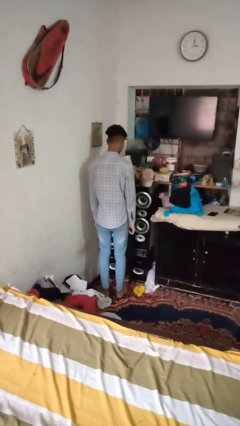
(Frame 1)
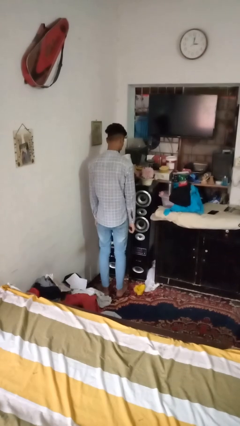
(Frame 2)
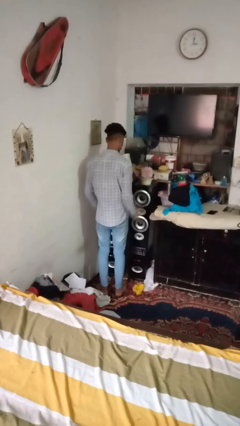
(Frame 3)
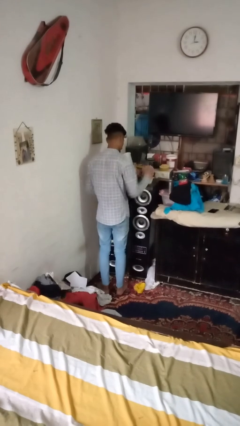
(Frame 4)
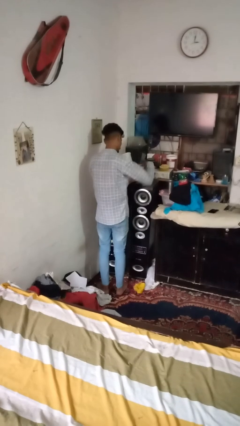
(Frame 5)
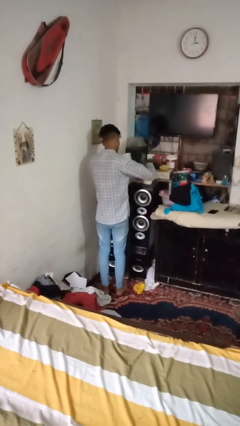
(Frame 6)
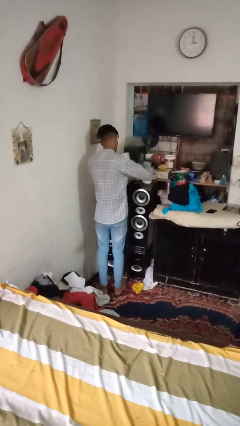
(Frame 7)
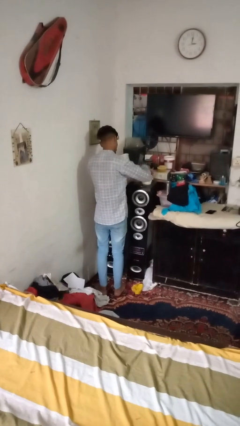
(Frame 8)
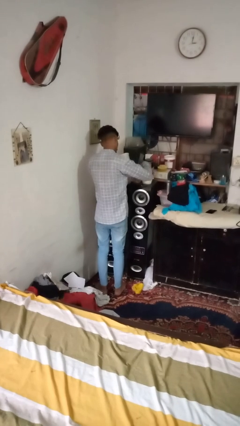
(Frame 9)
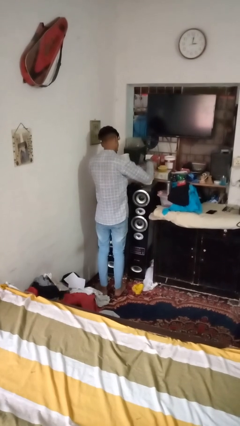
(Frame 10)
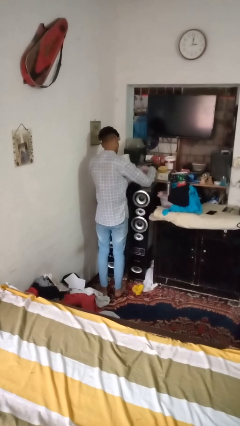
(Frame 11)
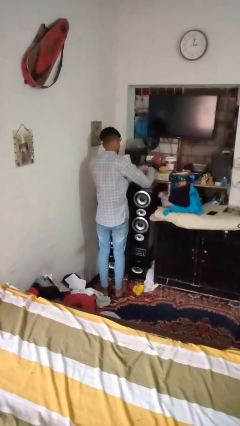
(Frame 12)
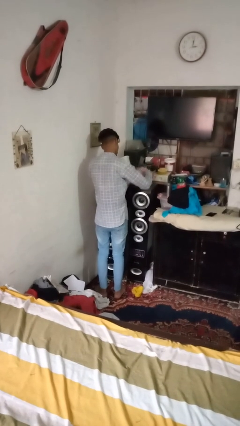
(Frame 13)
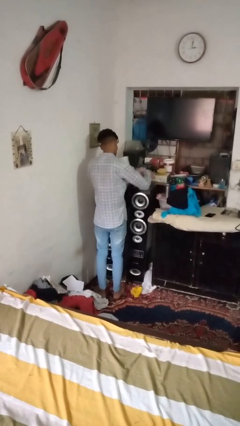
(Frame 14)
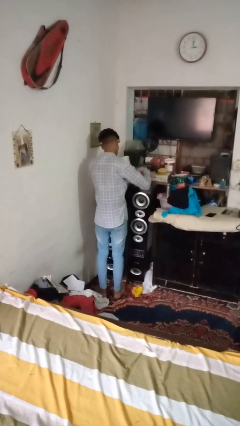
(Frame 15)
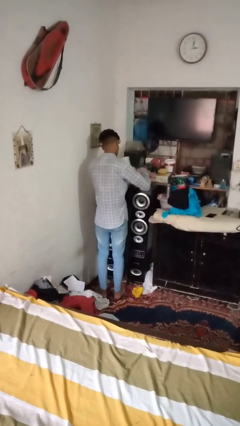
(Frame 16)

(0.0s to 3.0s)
person arranges flowers in vase

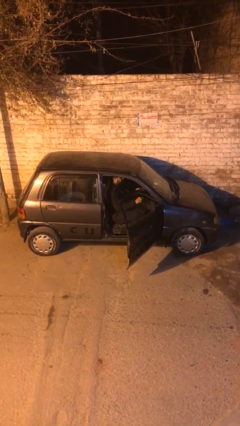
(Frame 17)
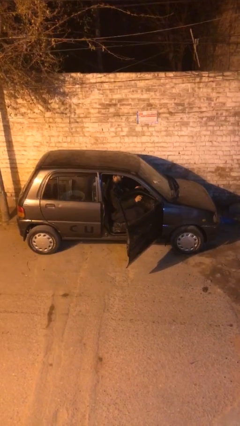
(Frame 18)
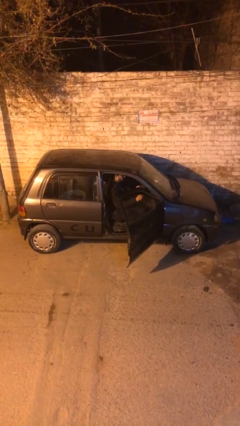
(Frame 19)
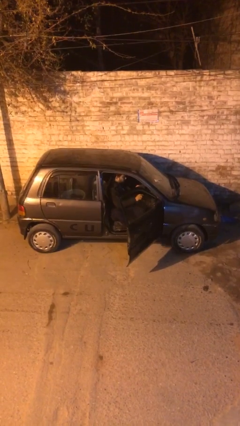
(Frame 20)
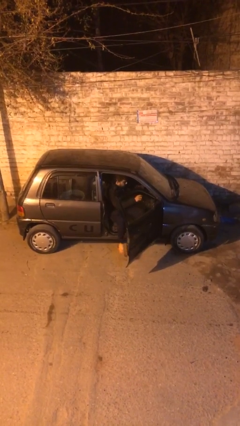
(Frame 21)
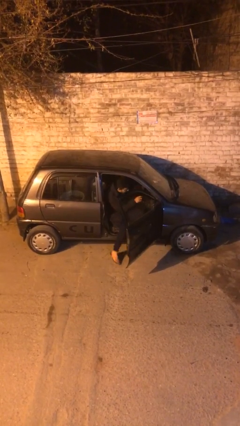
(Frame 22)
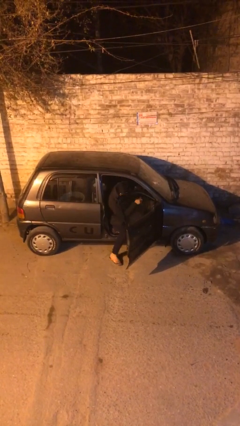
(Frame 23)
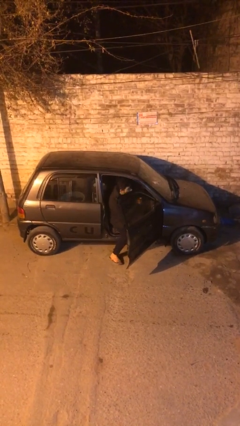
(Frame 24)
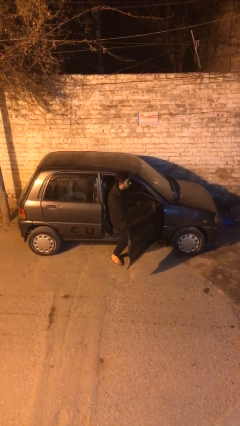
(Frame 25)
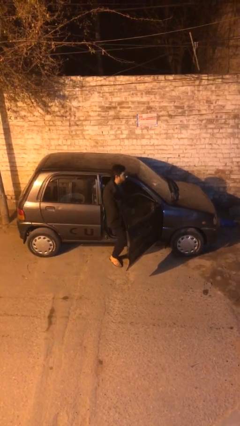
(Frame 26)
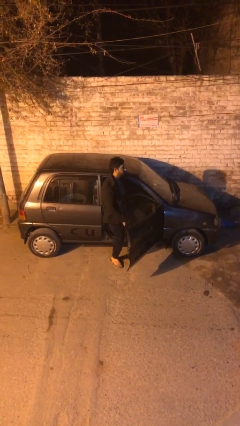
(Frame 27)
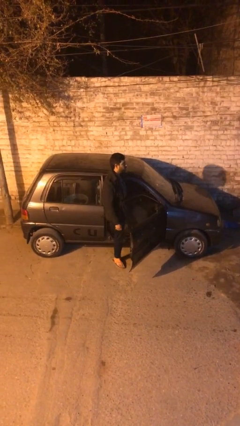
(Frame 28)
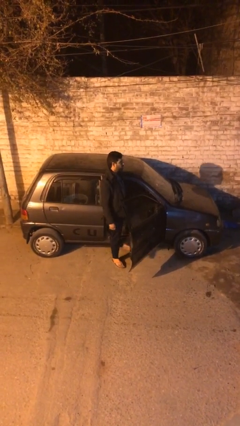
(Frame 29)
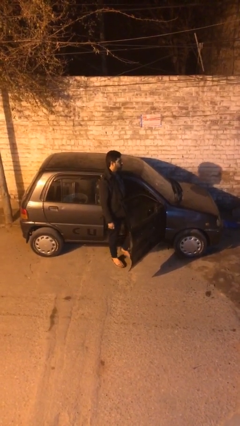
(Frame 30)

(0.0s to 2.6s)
person exits car

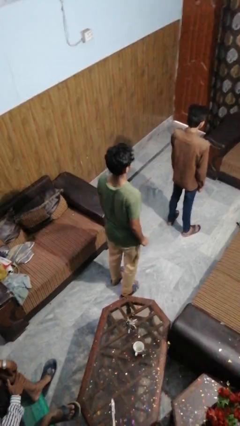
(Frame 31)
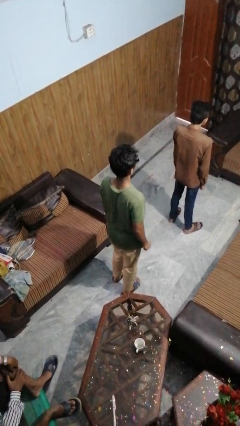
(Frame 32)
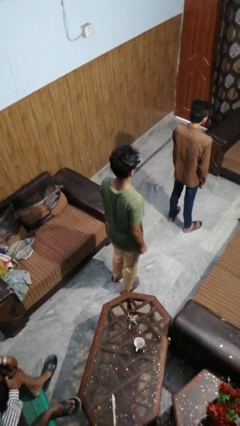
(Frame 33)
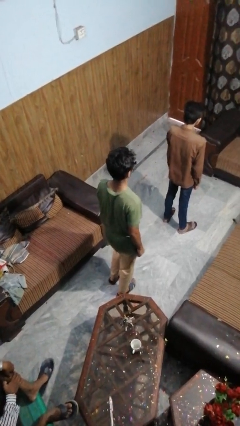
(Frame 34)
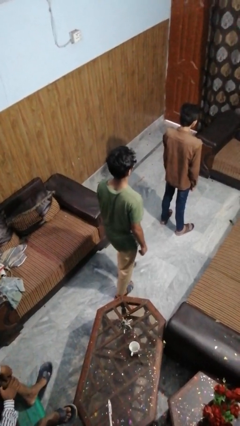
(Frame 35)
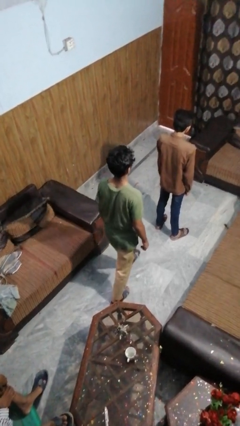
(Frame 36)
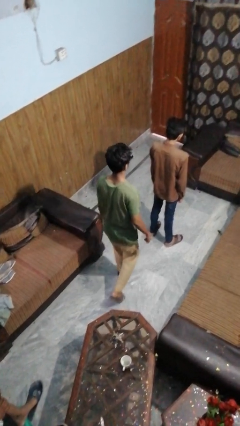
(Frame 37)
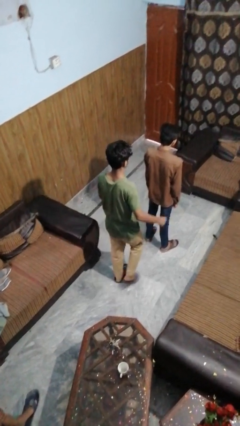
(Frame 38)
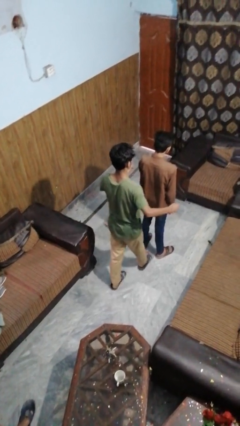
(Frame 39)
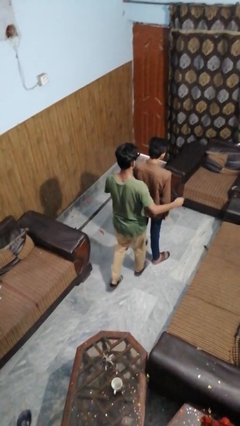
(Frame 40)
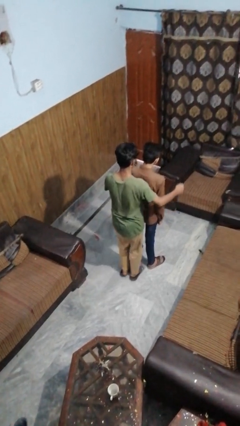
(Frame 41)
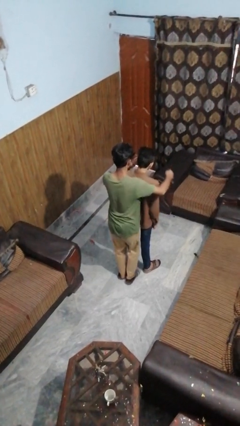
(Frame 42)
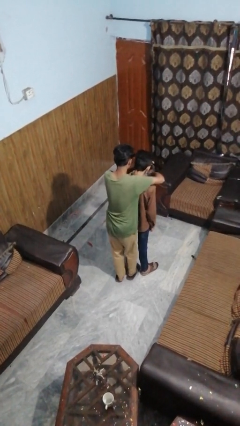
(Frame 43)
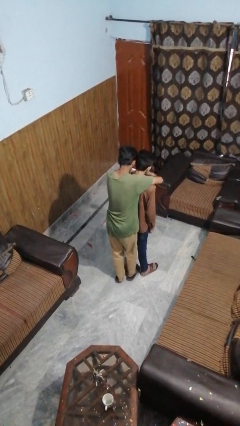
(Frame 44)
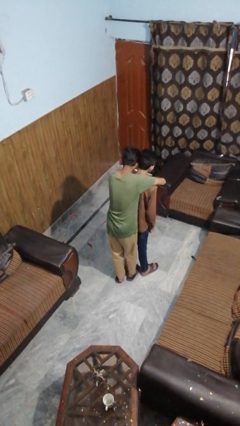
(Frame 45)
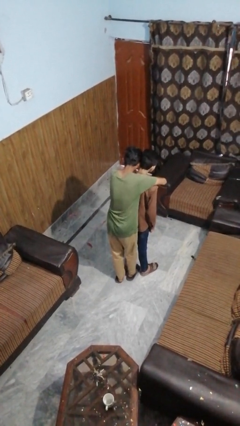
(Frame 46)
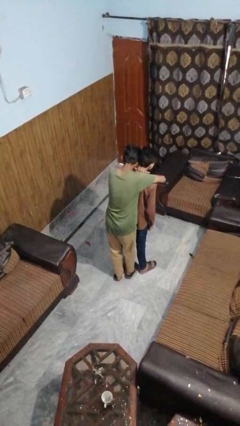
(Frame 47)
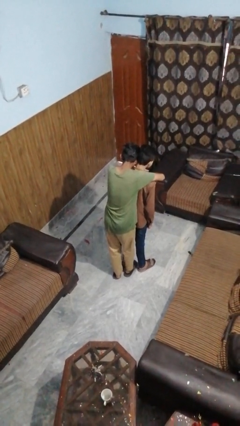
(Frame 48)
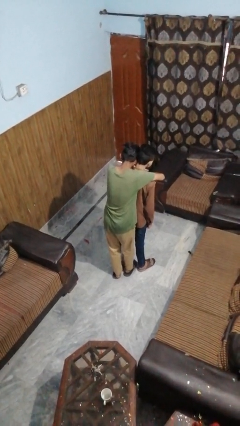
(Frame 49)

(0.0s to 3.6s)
person hugs person from behind

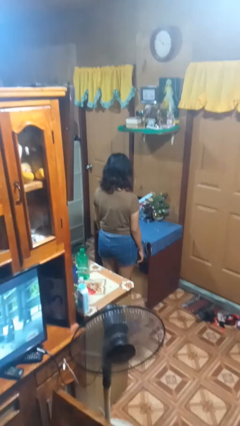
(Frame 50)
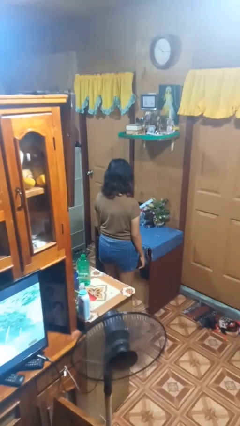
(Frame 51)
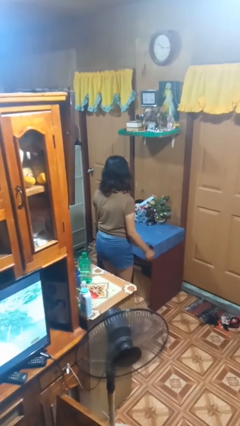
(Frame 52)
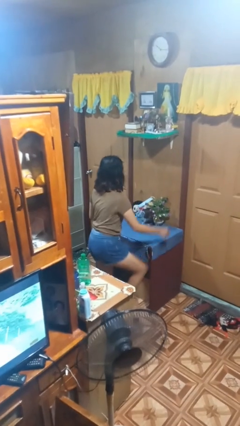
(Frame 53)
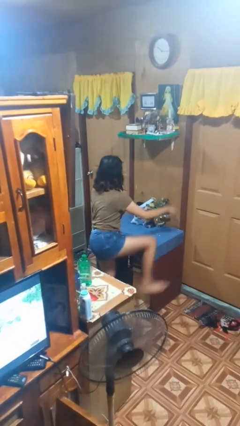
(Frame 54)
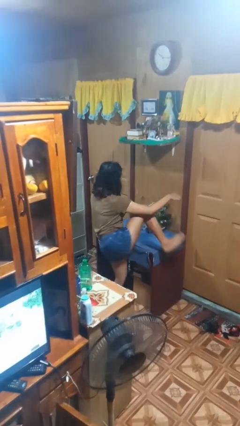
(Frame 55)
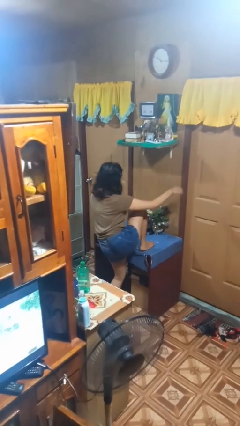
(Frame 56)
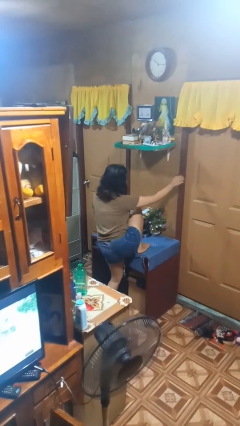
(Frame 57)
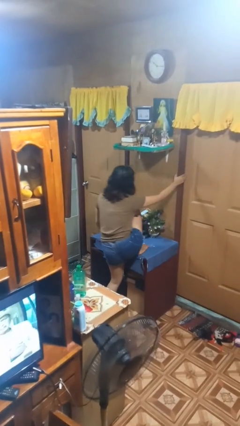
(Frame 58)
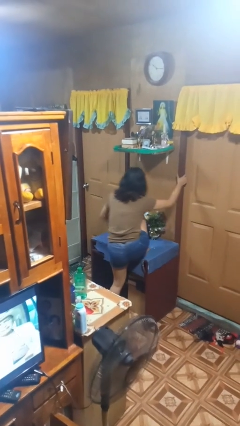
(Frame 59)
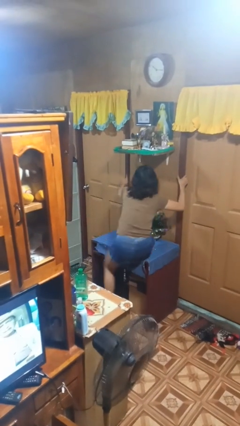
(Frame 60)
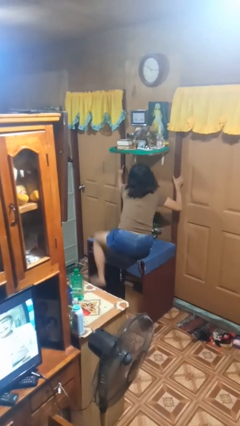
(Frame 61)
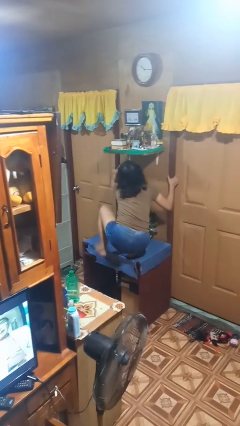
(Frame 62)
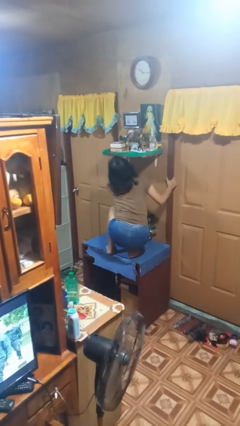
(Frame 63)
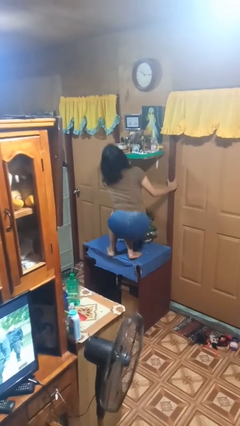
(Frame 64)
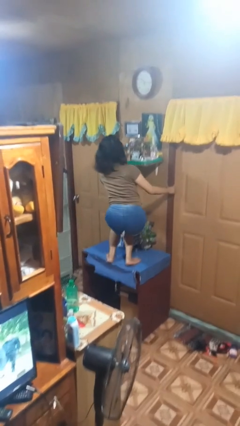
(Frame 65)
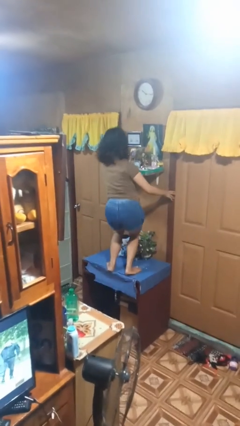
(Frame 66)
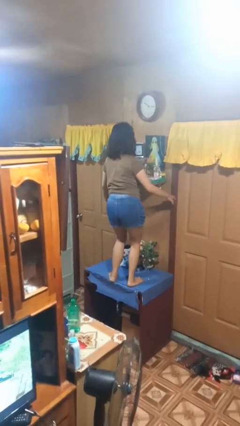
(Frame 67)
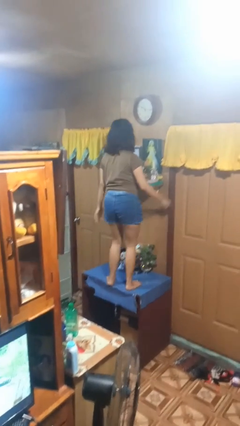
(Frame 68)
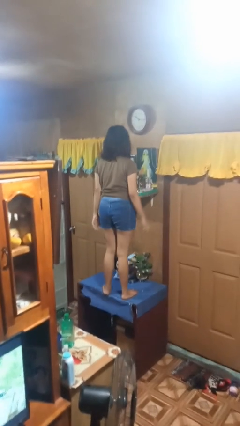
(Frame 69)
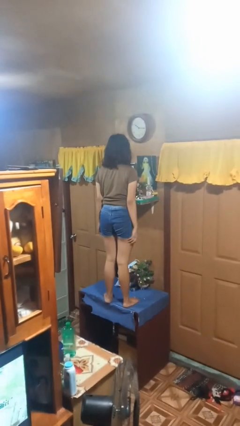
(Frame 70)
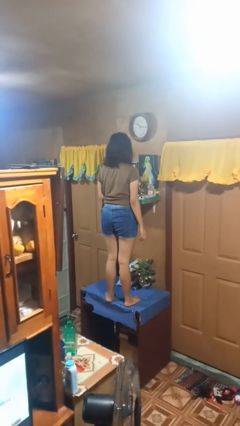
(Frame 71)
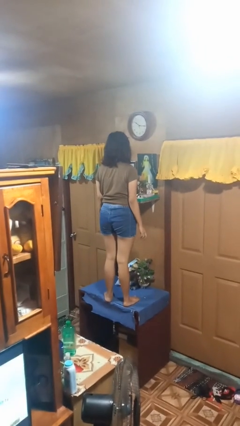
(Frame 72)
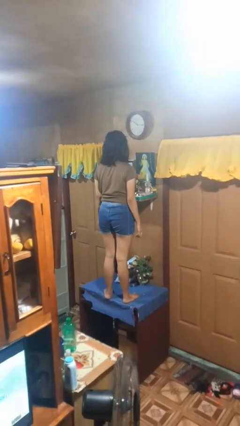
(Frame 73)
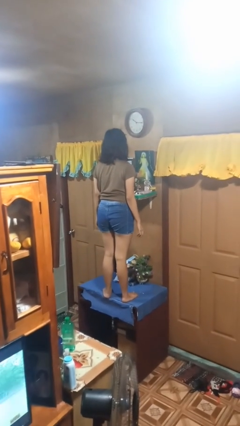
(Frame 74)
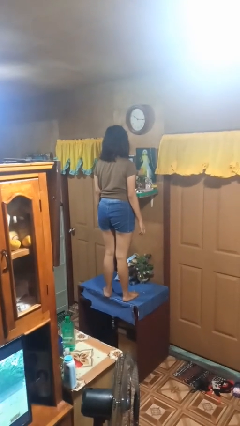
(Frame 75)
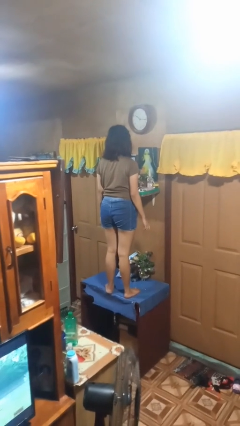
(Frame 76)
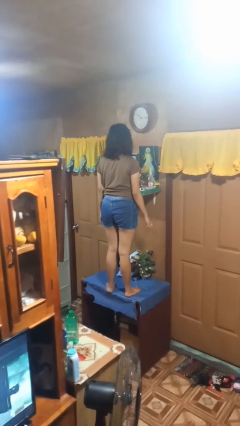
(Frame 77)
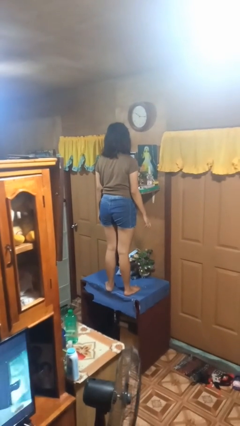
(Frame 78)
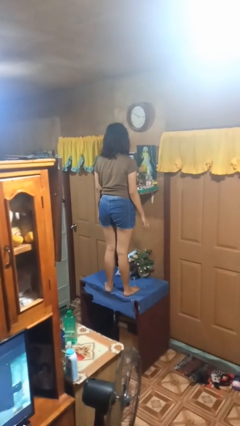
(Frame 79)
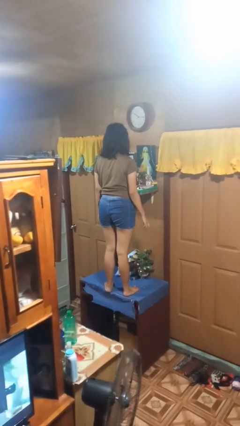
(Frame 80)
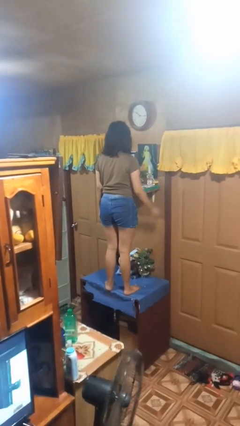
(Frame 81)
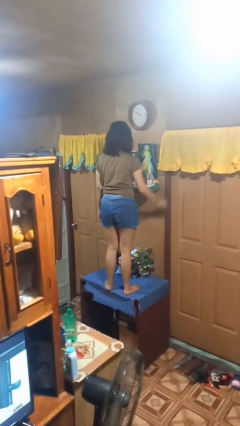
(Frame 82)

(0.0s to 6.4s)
person climbs on table

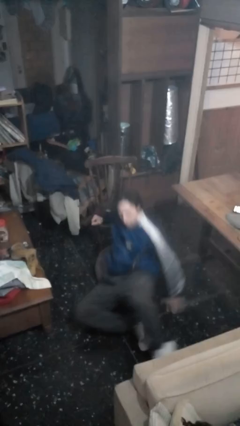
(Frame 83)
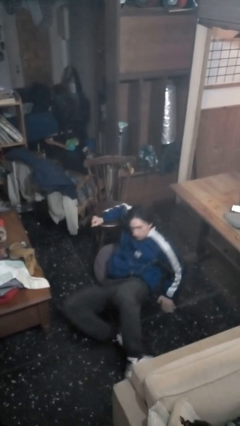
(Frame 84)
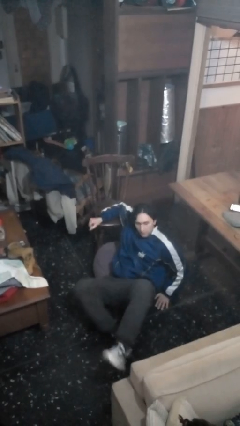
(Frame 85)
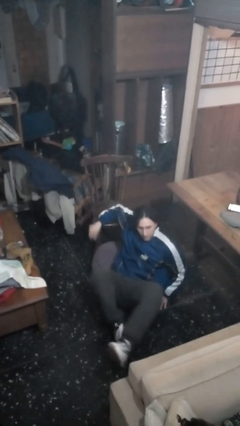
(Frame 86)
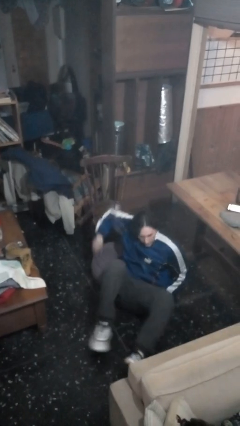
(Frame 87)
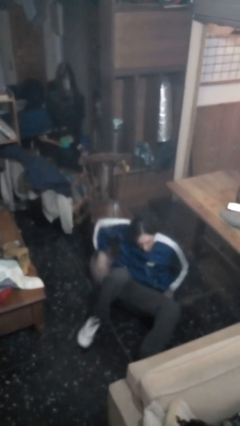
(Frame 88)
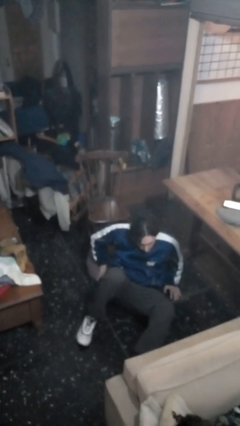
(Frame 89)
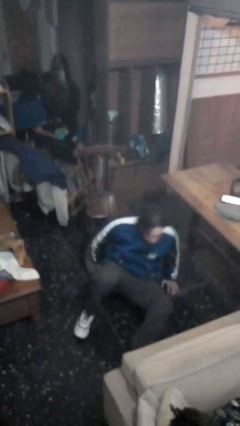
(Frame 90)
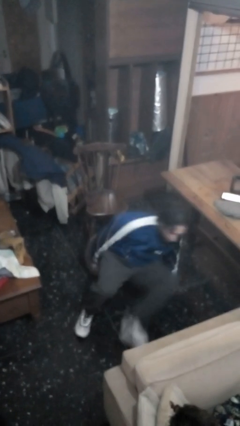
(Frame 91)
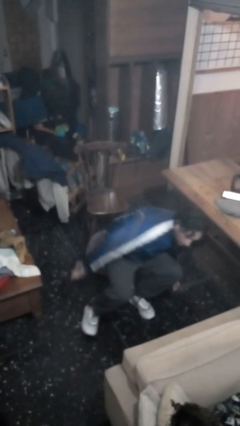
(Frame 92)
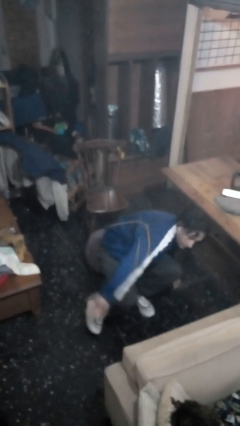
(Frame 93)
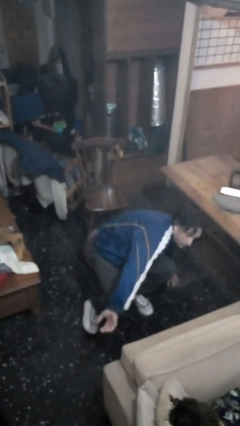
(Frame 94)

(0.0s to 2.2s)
person falls from chair
